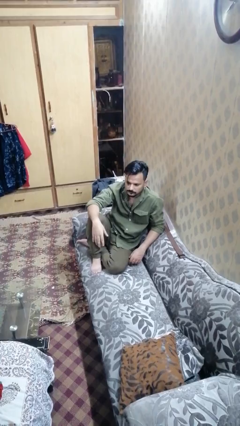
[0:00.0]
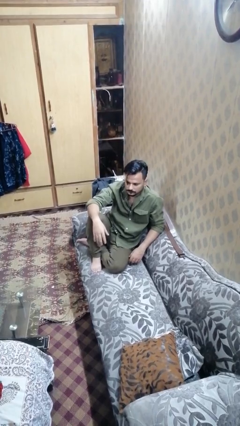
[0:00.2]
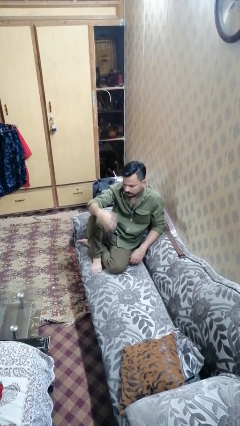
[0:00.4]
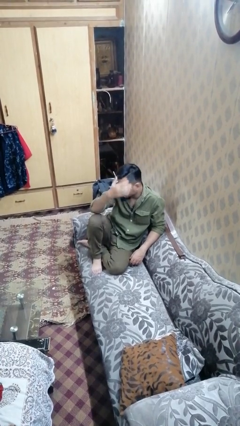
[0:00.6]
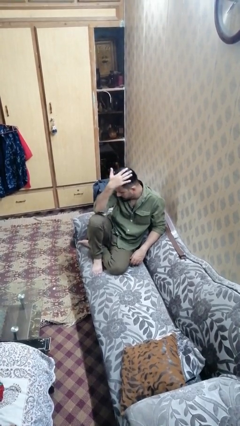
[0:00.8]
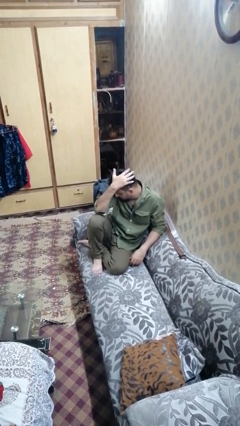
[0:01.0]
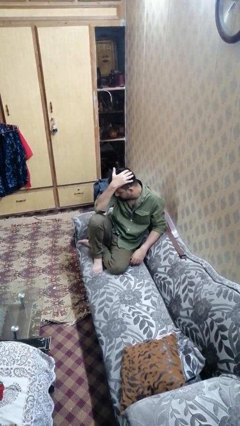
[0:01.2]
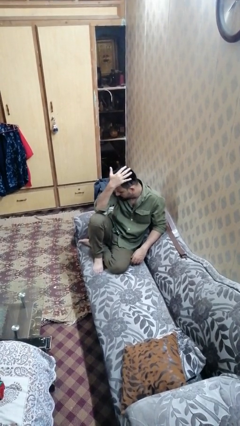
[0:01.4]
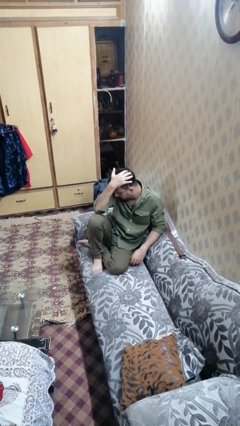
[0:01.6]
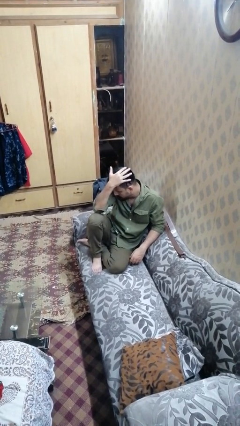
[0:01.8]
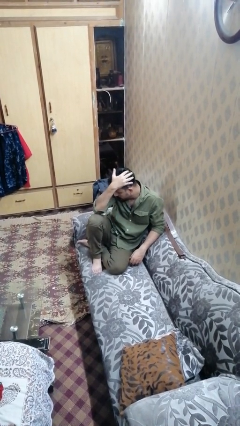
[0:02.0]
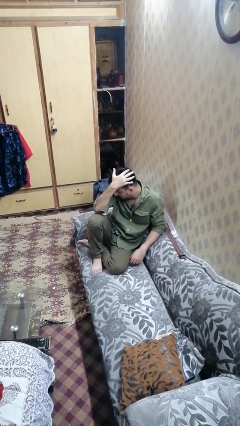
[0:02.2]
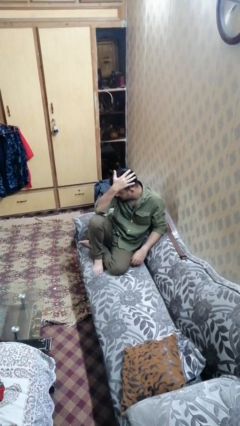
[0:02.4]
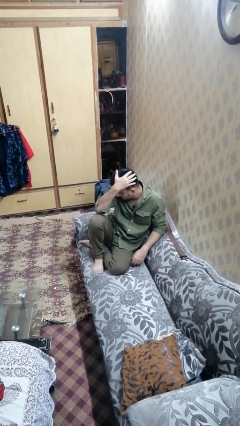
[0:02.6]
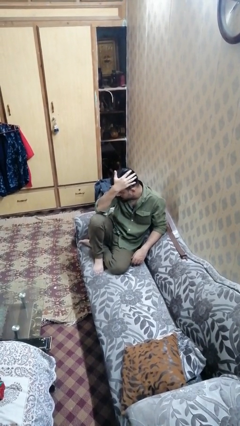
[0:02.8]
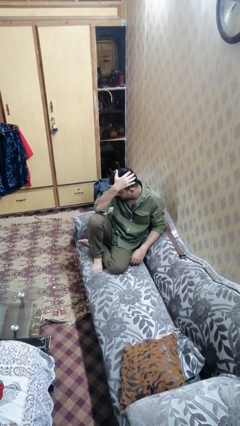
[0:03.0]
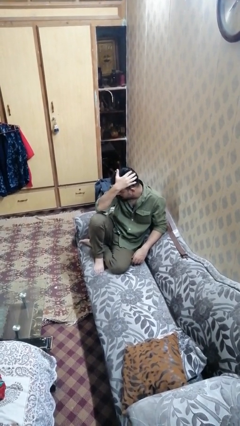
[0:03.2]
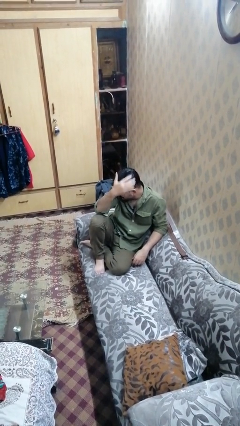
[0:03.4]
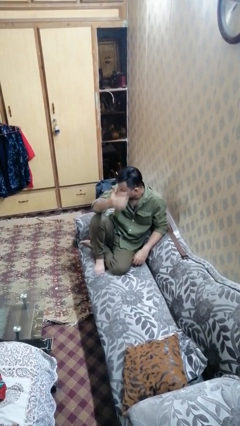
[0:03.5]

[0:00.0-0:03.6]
person pats head

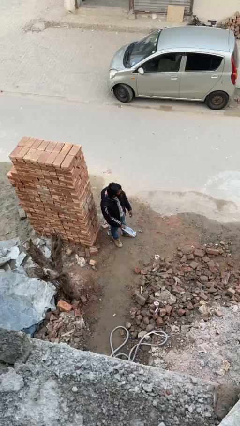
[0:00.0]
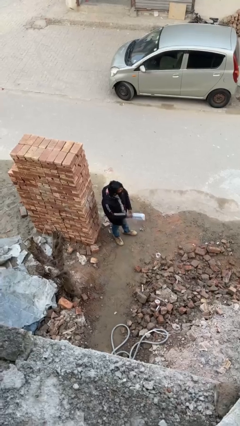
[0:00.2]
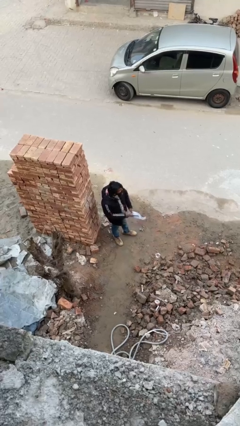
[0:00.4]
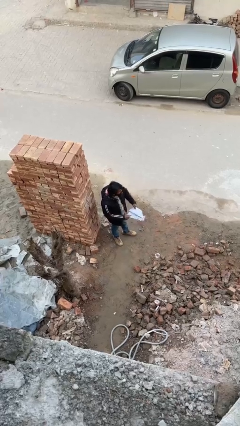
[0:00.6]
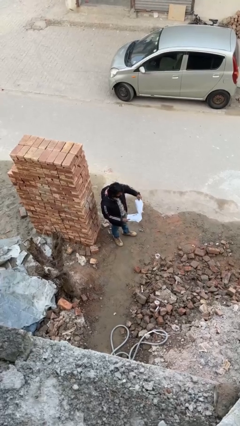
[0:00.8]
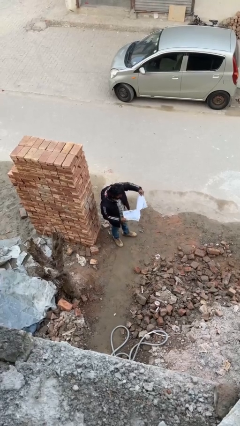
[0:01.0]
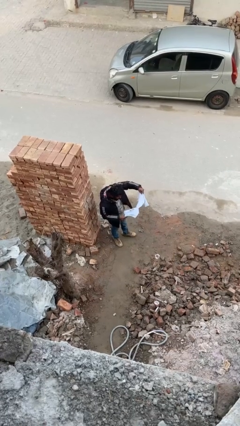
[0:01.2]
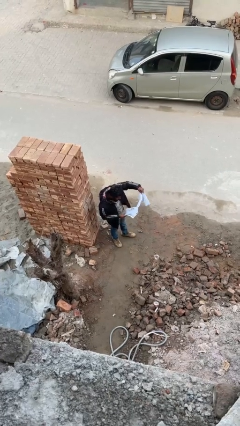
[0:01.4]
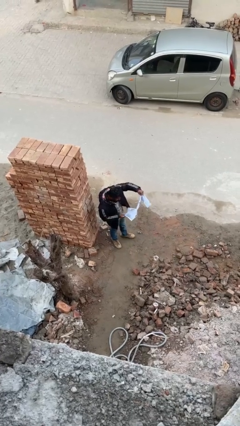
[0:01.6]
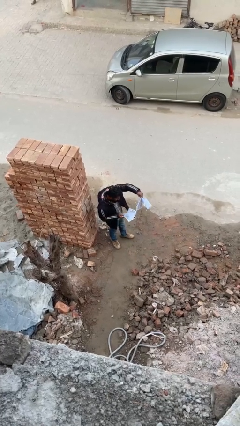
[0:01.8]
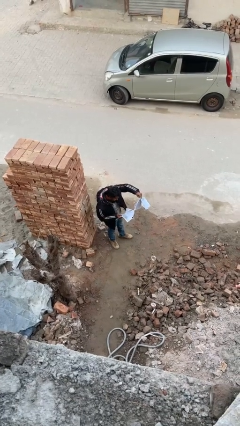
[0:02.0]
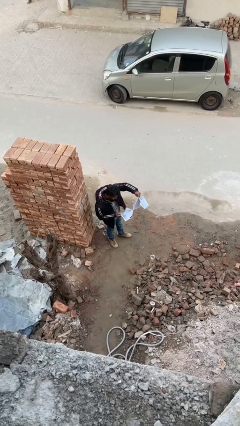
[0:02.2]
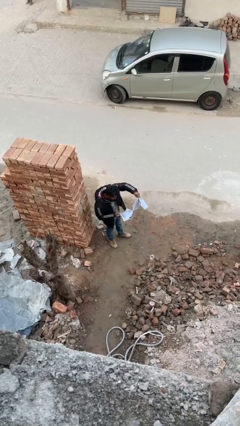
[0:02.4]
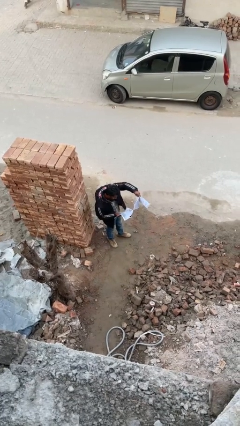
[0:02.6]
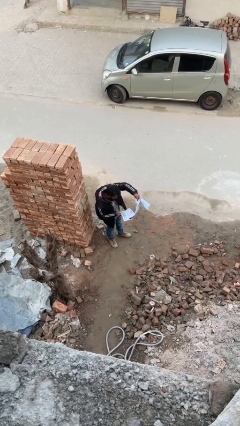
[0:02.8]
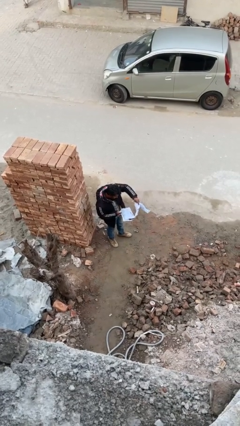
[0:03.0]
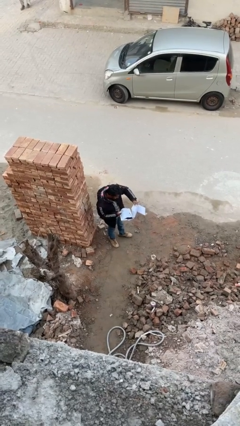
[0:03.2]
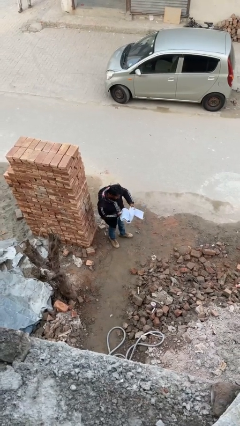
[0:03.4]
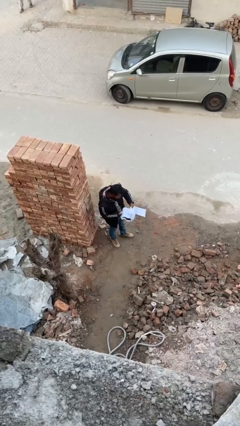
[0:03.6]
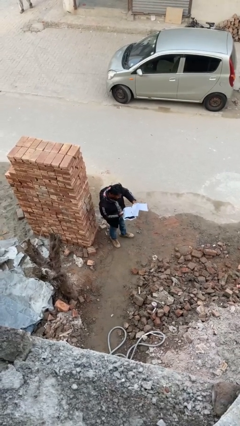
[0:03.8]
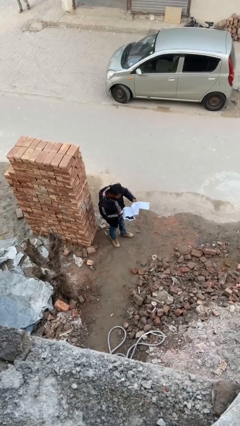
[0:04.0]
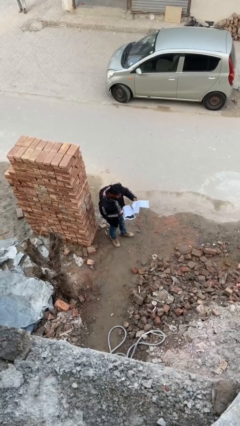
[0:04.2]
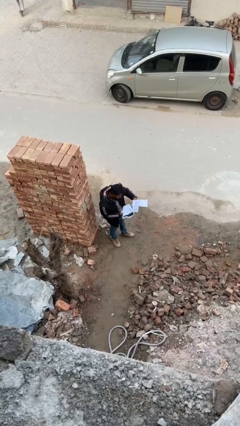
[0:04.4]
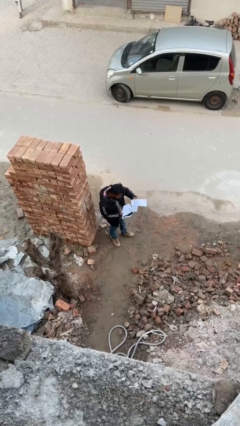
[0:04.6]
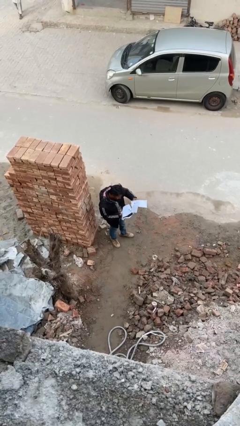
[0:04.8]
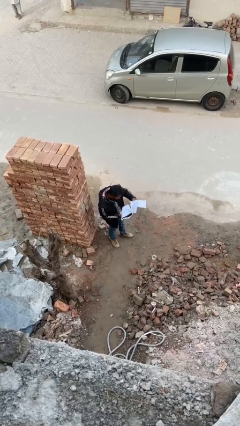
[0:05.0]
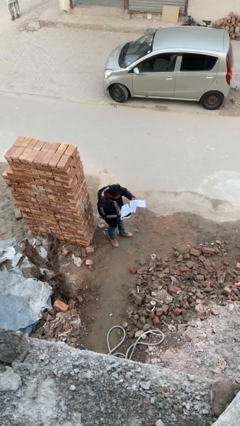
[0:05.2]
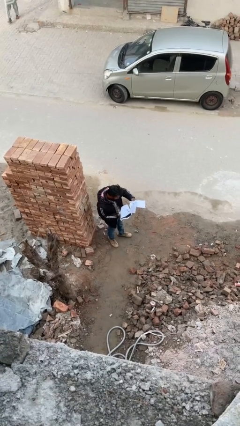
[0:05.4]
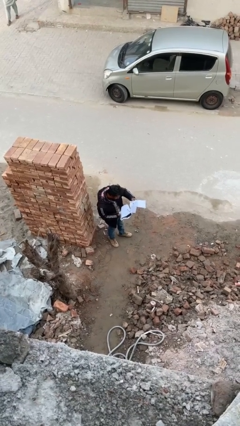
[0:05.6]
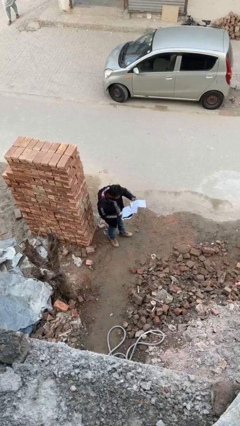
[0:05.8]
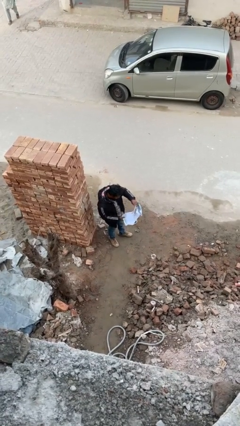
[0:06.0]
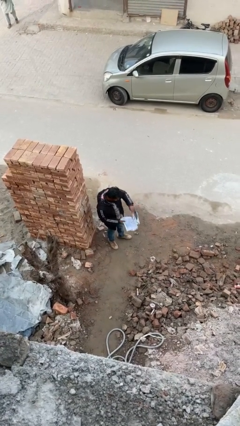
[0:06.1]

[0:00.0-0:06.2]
person reads document

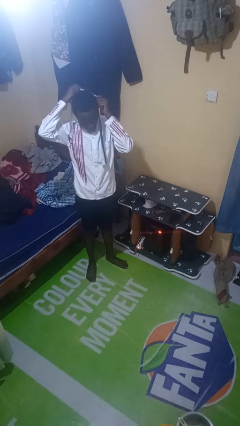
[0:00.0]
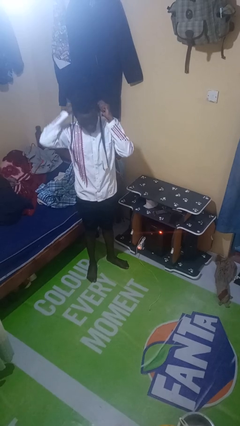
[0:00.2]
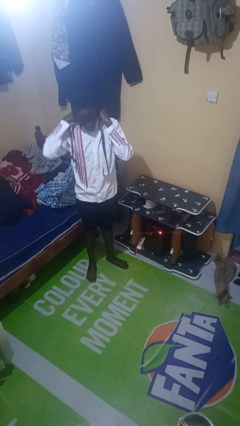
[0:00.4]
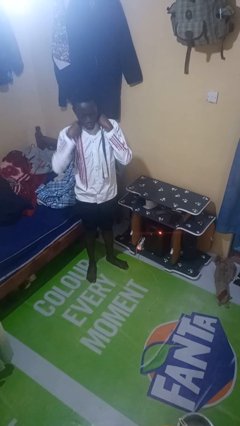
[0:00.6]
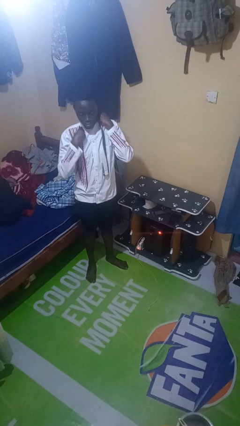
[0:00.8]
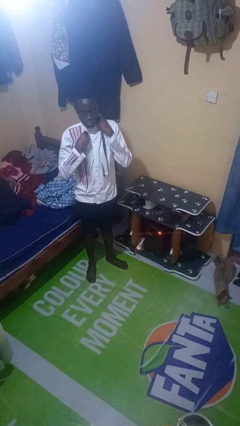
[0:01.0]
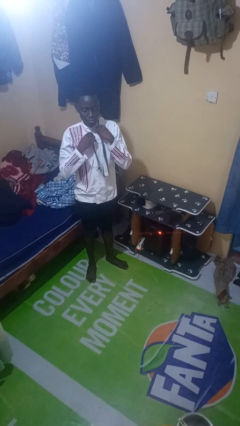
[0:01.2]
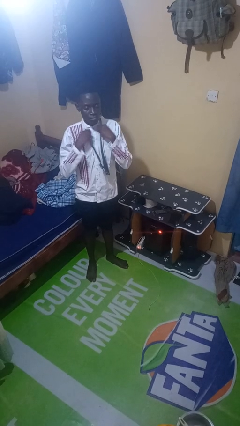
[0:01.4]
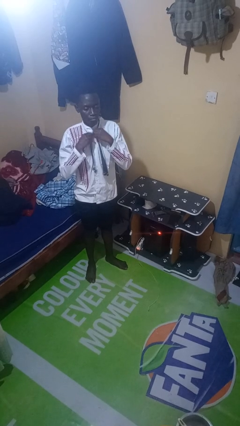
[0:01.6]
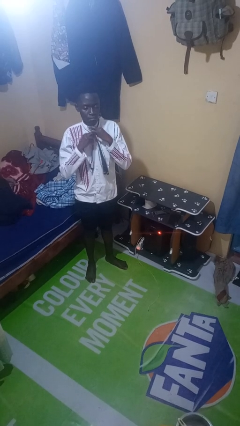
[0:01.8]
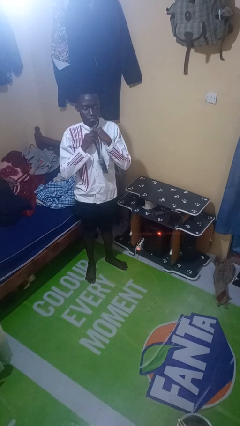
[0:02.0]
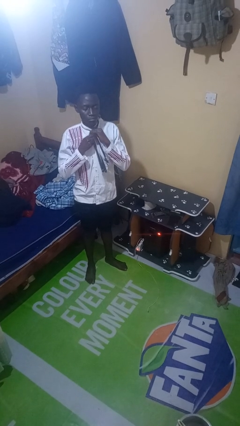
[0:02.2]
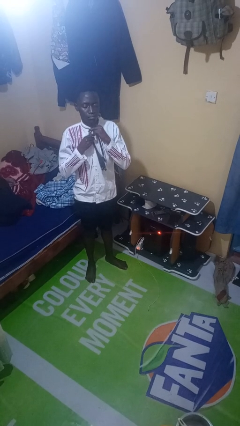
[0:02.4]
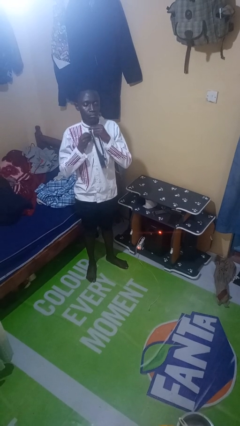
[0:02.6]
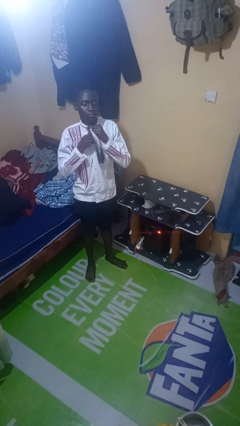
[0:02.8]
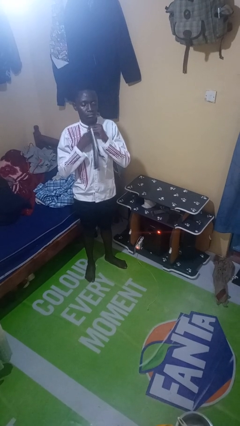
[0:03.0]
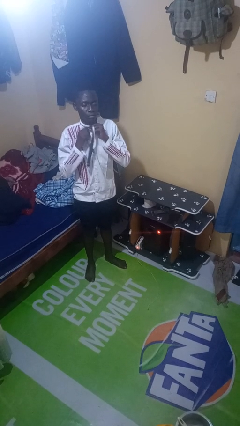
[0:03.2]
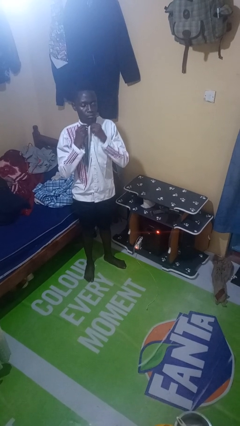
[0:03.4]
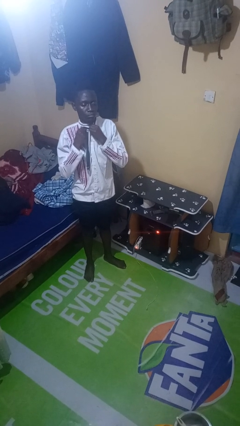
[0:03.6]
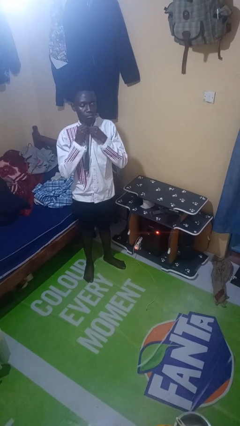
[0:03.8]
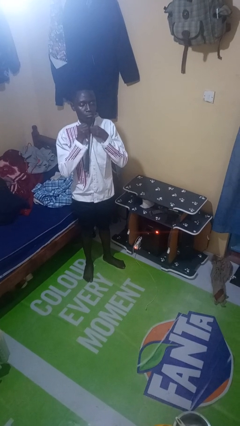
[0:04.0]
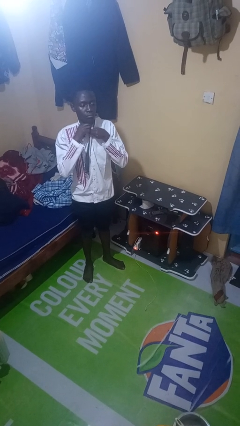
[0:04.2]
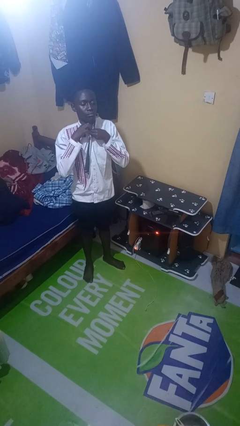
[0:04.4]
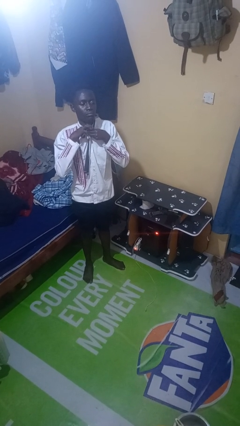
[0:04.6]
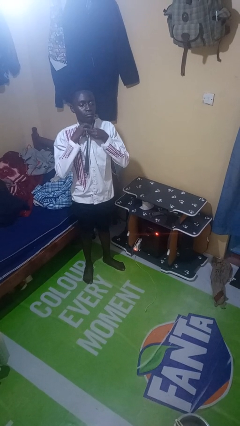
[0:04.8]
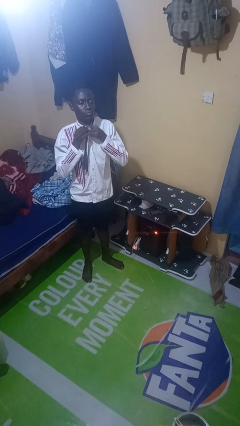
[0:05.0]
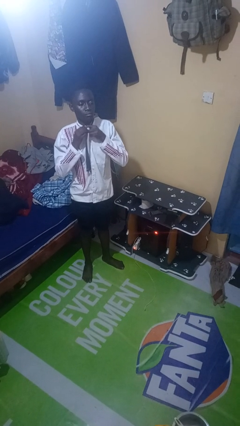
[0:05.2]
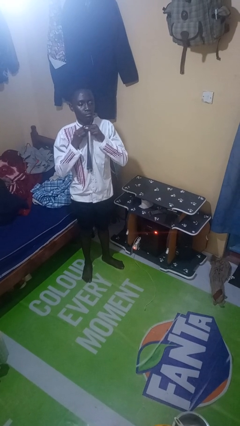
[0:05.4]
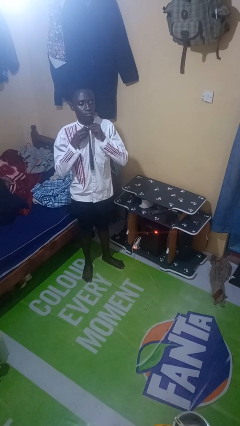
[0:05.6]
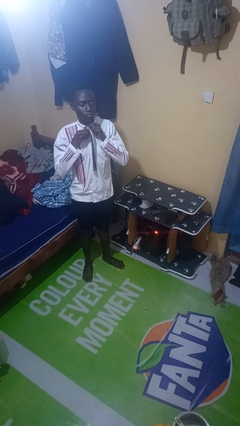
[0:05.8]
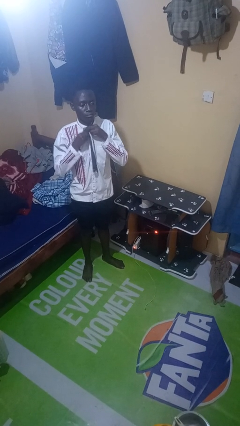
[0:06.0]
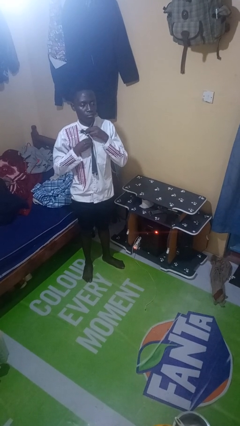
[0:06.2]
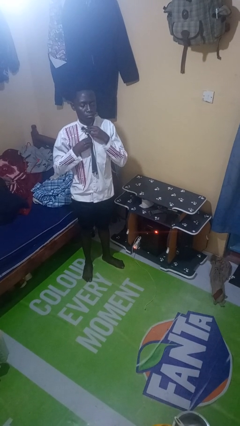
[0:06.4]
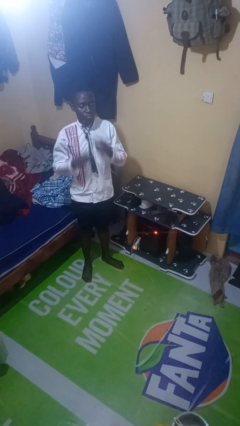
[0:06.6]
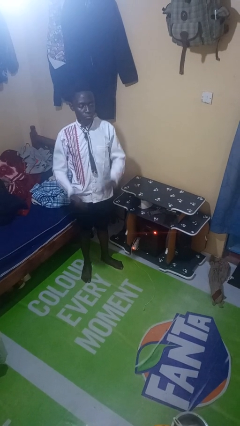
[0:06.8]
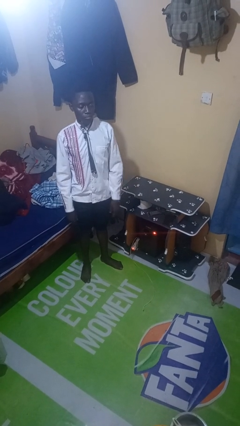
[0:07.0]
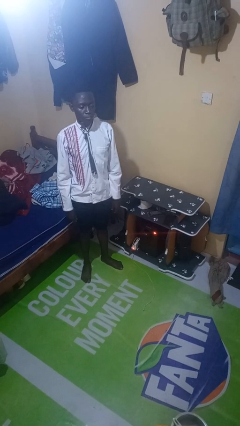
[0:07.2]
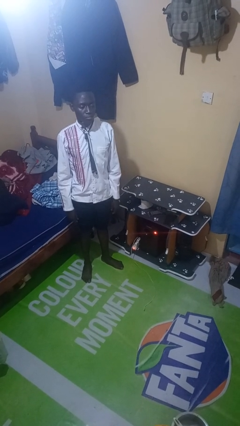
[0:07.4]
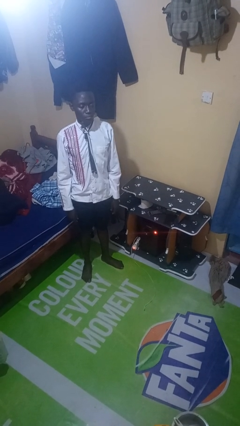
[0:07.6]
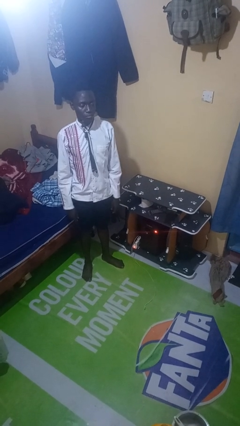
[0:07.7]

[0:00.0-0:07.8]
person puts on necktie
